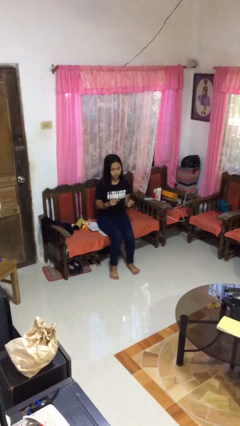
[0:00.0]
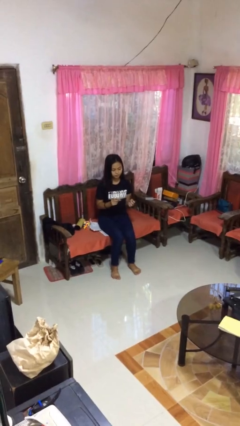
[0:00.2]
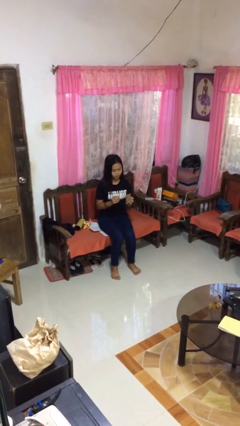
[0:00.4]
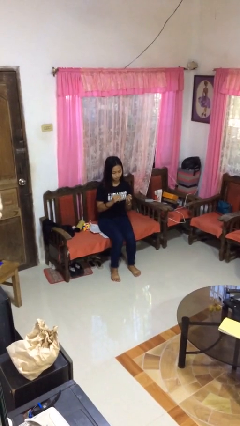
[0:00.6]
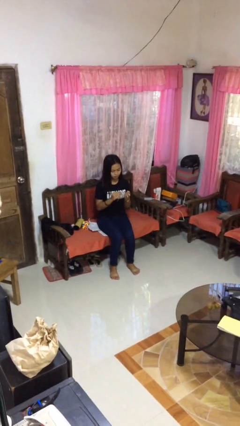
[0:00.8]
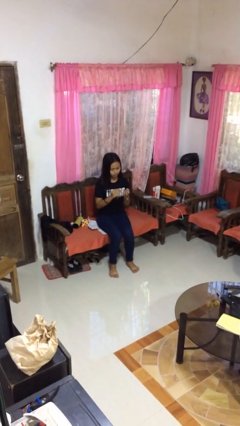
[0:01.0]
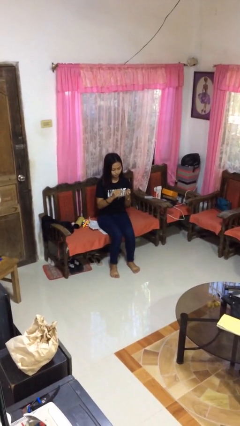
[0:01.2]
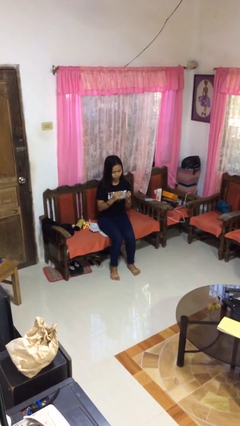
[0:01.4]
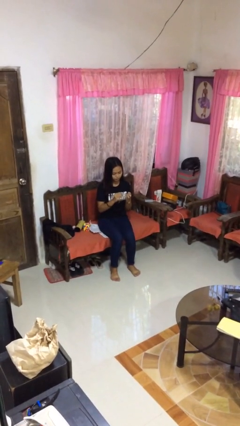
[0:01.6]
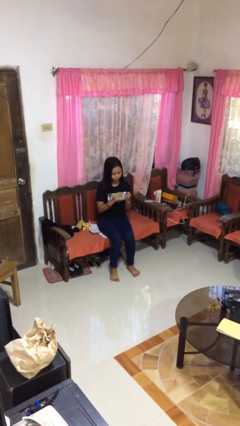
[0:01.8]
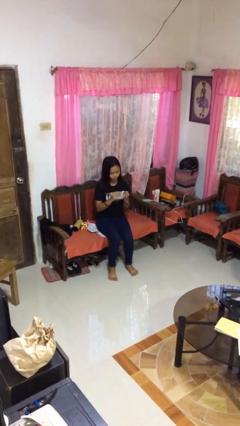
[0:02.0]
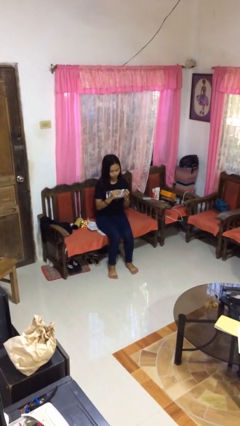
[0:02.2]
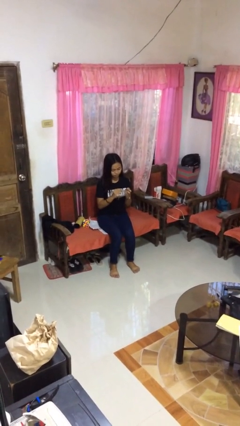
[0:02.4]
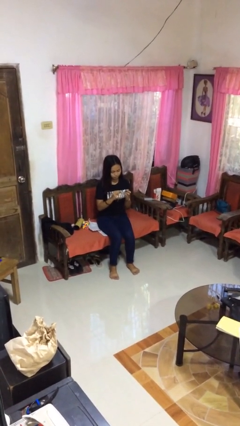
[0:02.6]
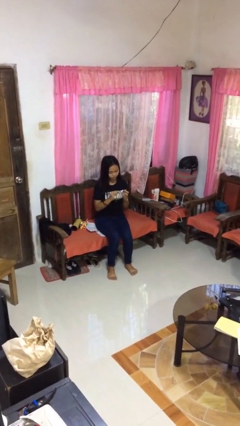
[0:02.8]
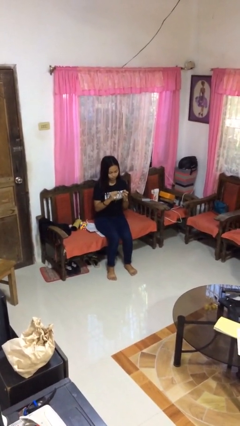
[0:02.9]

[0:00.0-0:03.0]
person clips fingernails

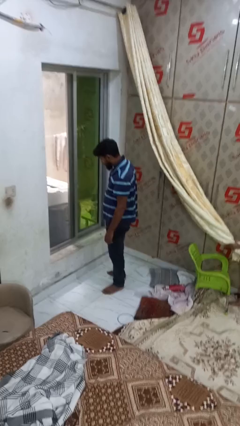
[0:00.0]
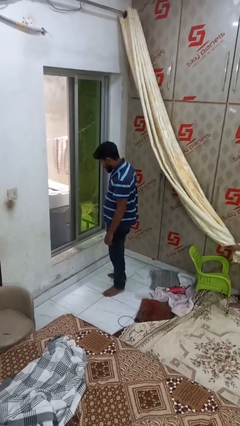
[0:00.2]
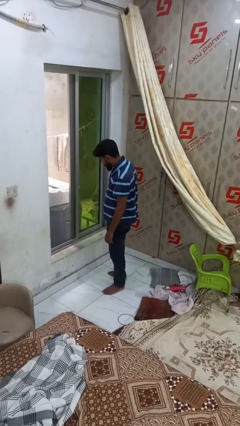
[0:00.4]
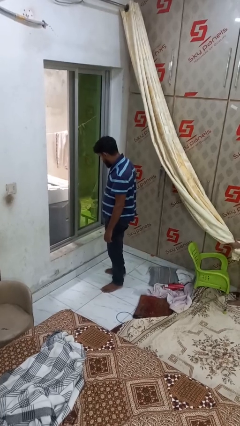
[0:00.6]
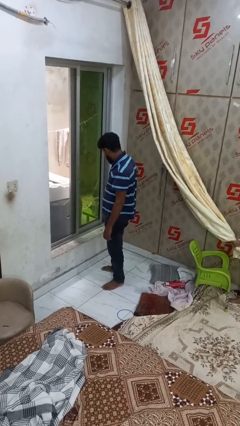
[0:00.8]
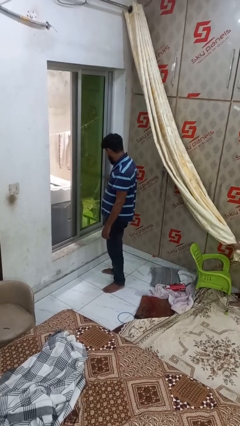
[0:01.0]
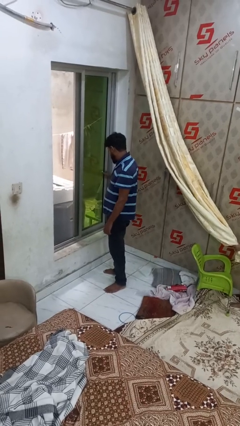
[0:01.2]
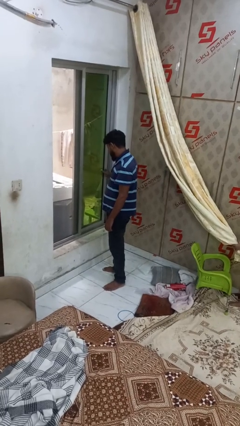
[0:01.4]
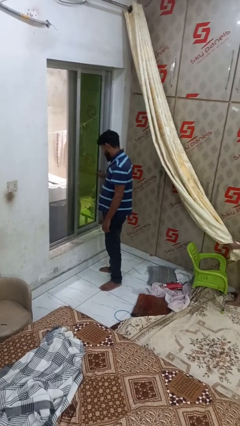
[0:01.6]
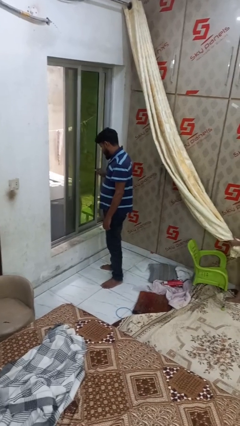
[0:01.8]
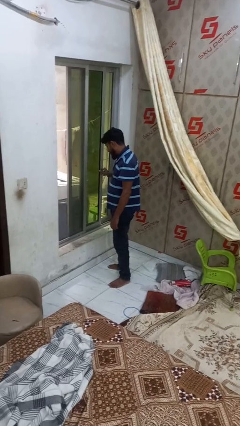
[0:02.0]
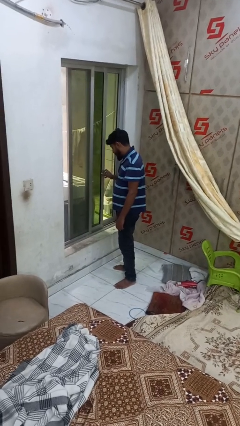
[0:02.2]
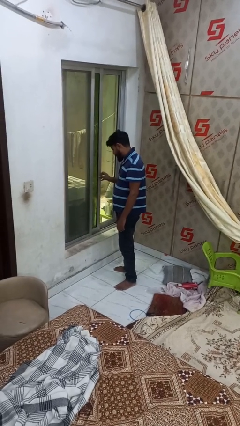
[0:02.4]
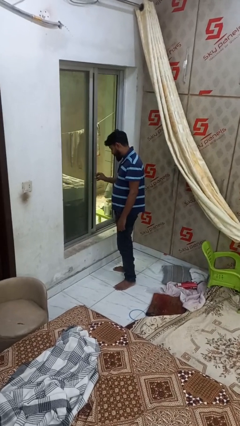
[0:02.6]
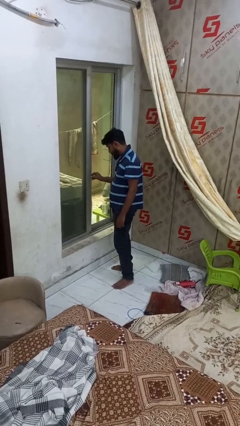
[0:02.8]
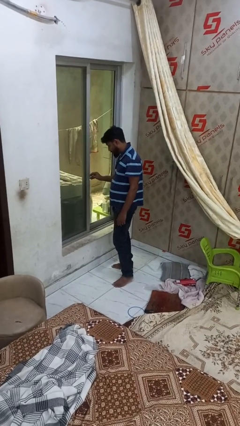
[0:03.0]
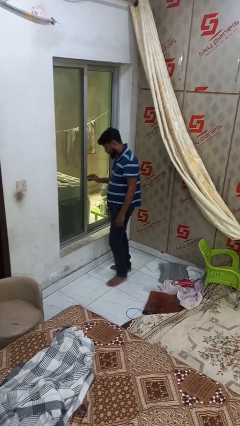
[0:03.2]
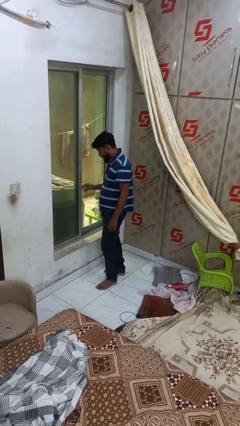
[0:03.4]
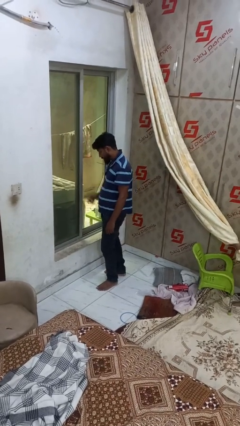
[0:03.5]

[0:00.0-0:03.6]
person closes sliding door

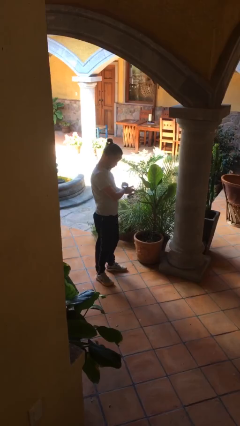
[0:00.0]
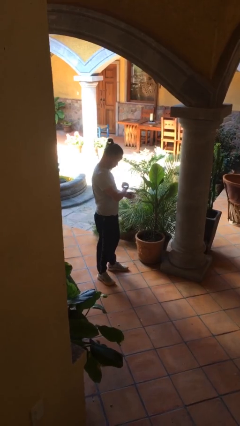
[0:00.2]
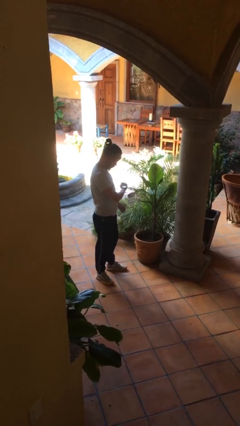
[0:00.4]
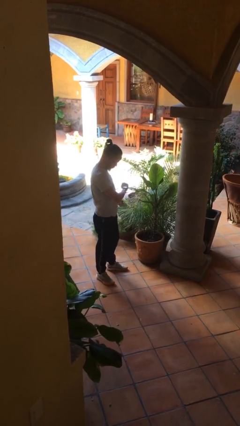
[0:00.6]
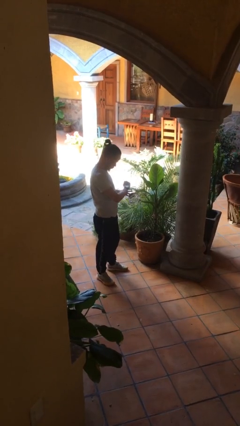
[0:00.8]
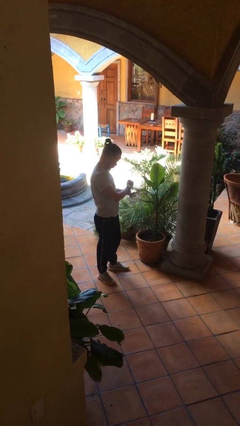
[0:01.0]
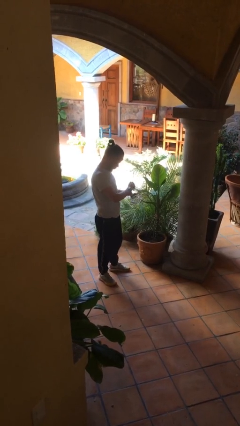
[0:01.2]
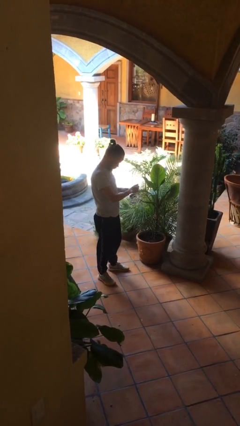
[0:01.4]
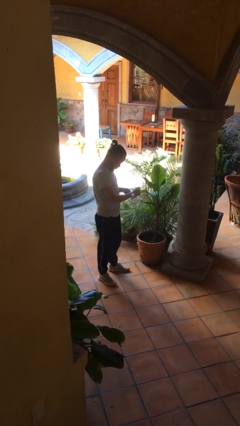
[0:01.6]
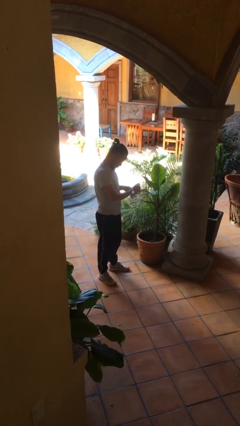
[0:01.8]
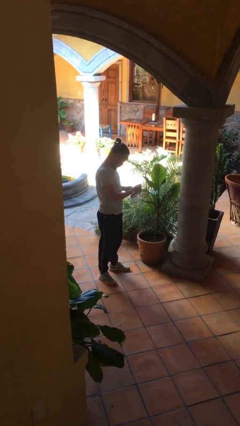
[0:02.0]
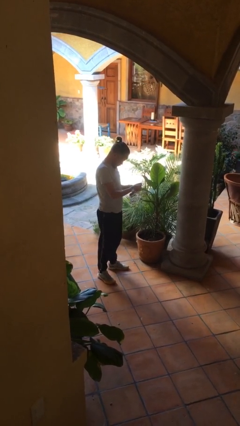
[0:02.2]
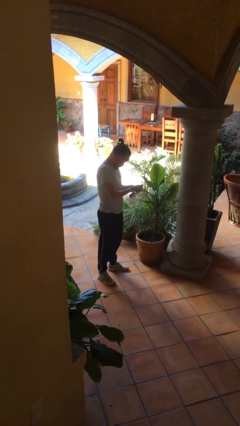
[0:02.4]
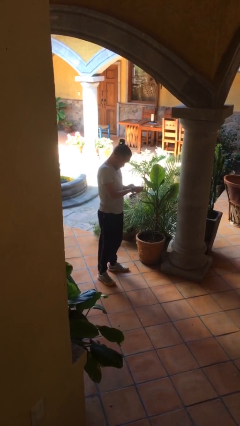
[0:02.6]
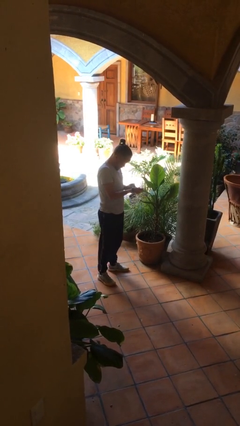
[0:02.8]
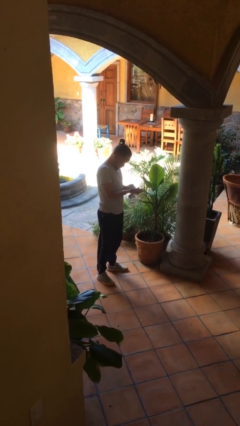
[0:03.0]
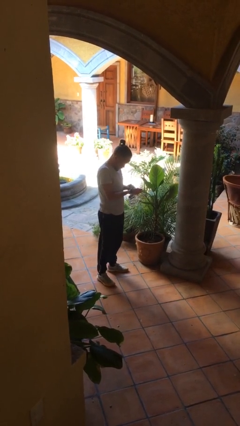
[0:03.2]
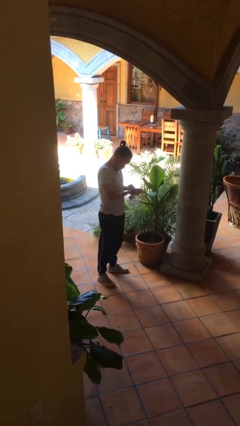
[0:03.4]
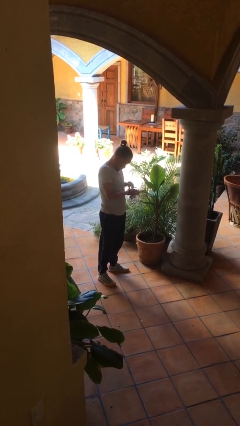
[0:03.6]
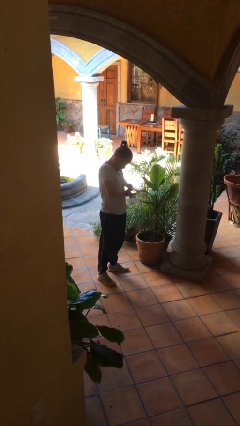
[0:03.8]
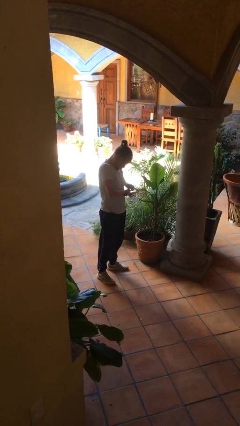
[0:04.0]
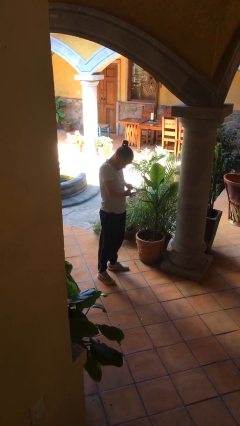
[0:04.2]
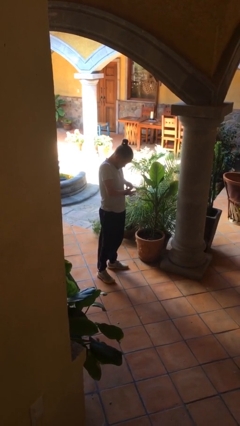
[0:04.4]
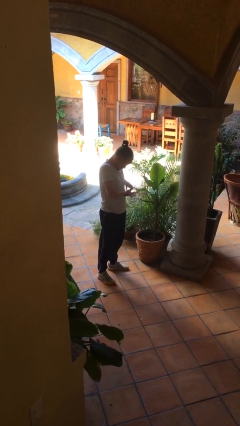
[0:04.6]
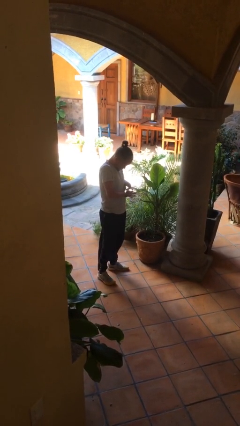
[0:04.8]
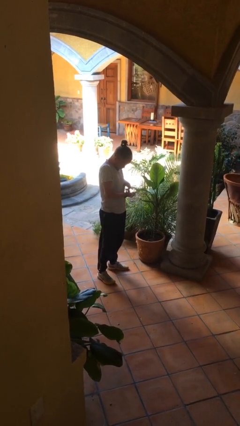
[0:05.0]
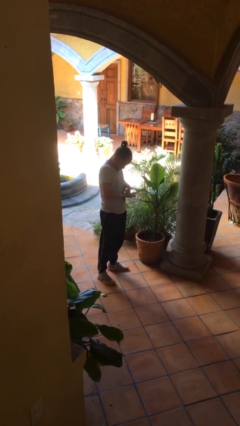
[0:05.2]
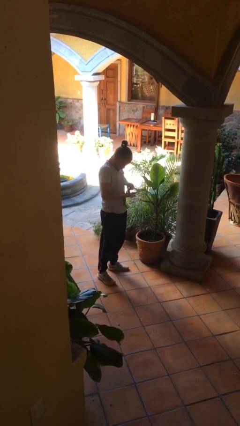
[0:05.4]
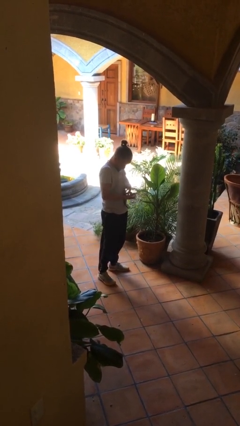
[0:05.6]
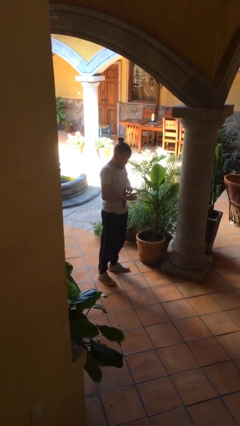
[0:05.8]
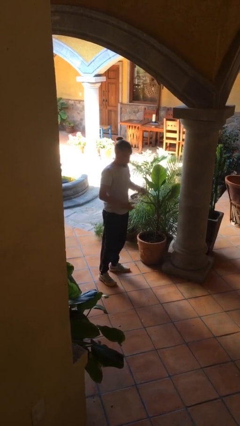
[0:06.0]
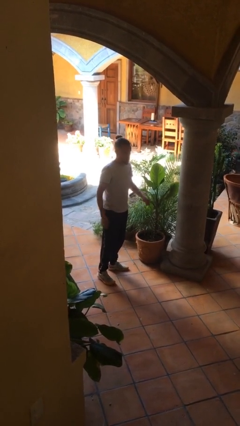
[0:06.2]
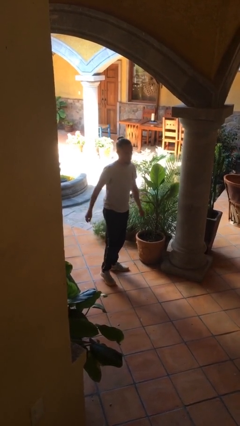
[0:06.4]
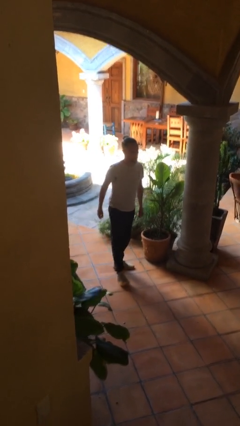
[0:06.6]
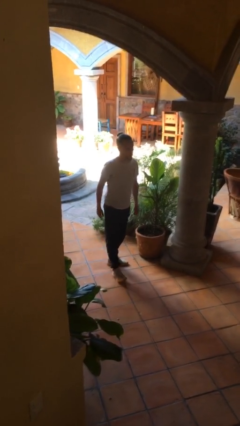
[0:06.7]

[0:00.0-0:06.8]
person takes off wristwatch

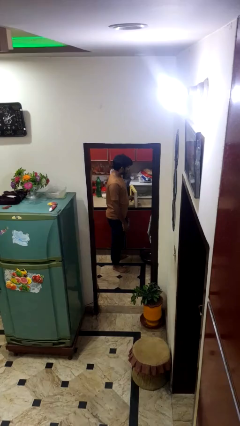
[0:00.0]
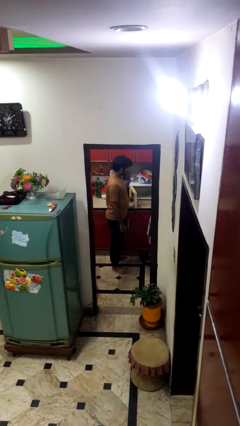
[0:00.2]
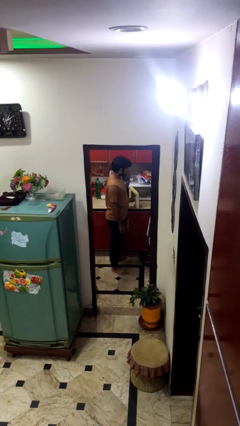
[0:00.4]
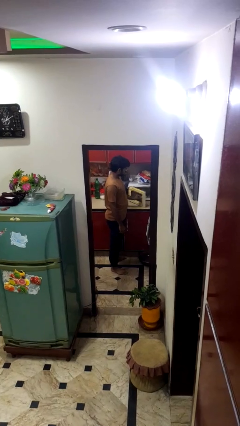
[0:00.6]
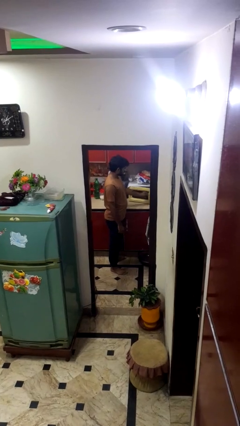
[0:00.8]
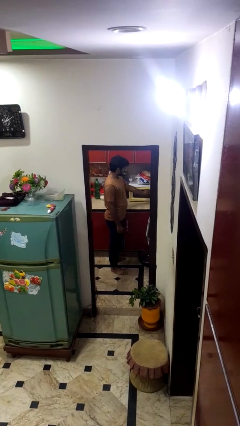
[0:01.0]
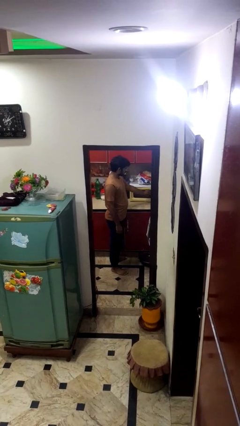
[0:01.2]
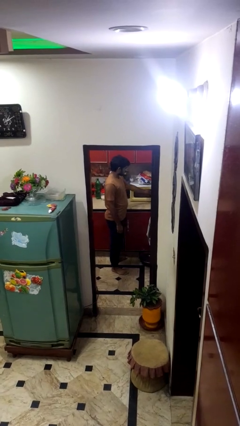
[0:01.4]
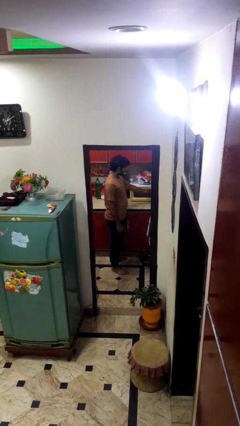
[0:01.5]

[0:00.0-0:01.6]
person closes microwave

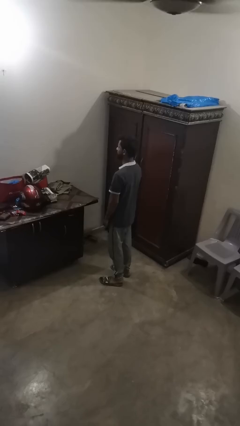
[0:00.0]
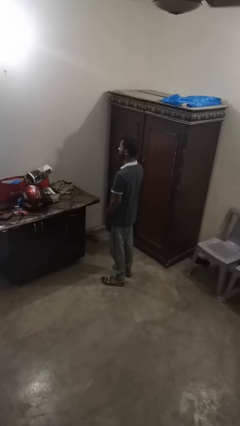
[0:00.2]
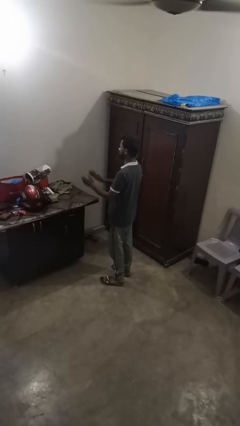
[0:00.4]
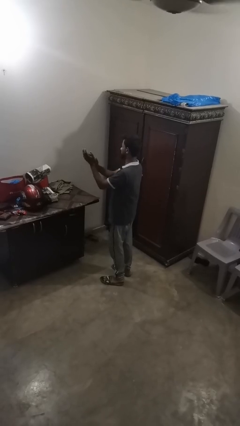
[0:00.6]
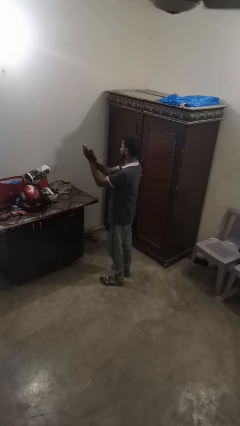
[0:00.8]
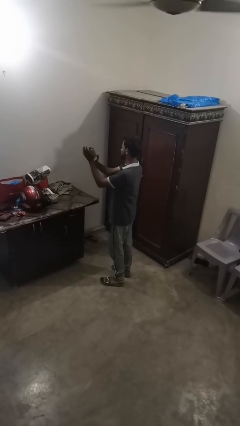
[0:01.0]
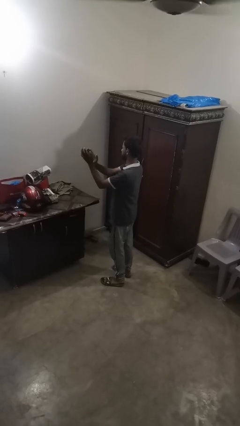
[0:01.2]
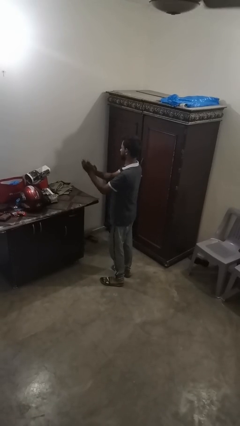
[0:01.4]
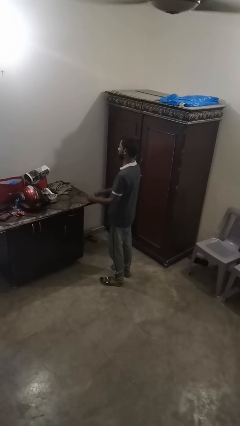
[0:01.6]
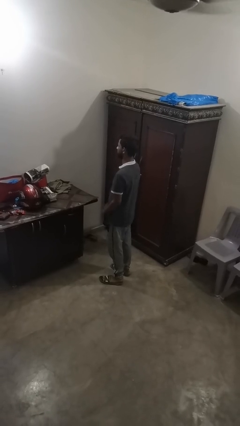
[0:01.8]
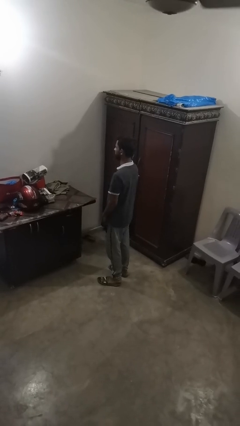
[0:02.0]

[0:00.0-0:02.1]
person claps hands

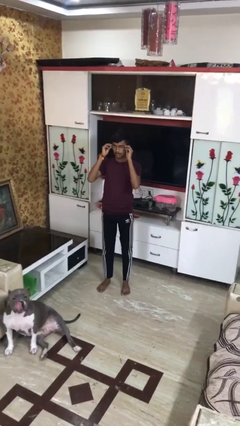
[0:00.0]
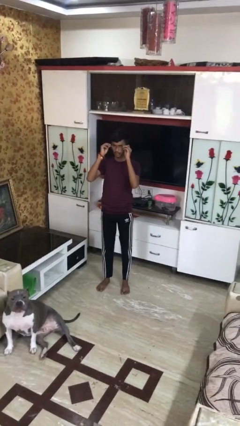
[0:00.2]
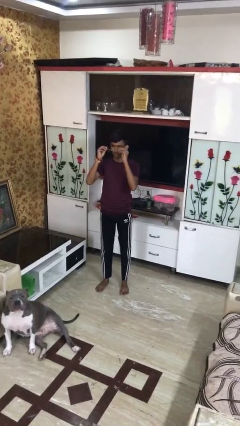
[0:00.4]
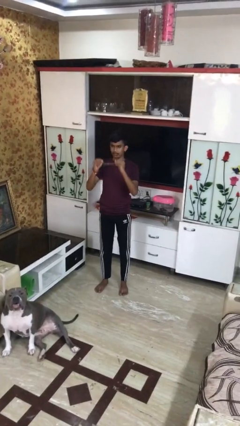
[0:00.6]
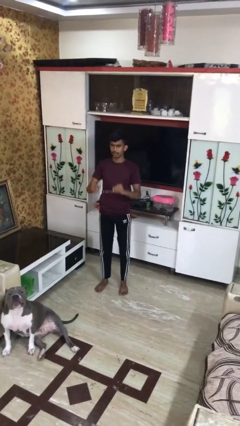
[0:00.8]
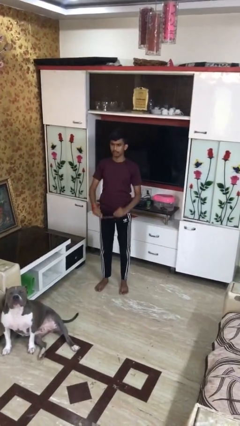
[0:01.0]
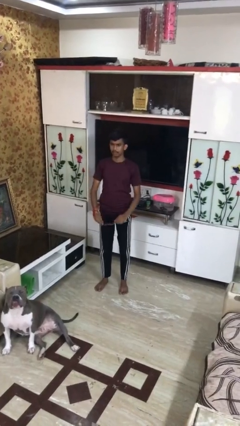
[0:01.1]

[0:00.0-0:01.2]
person takes off glasses
